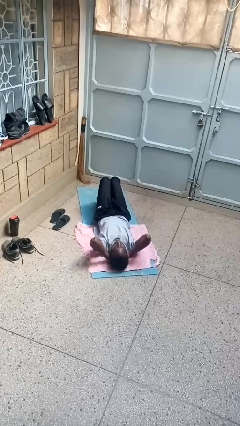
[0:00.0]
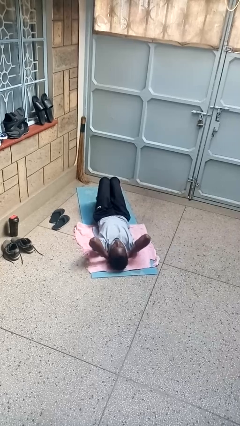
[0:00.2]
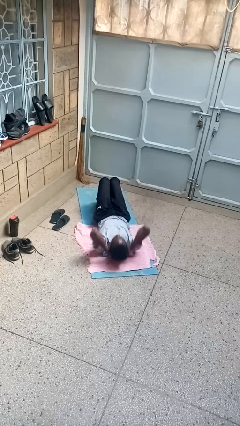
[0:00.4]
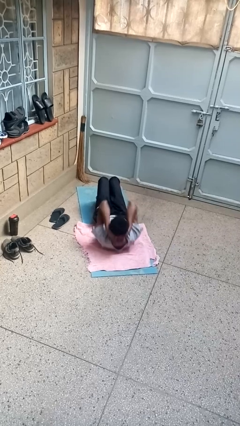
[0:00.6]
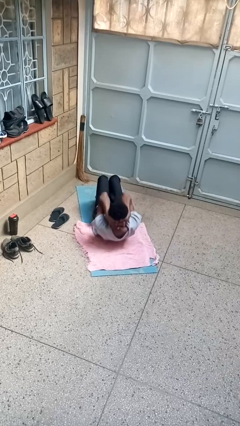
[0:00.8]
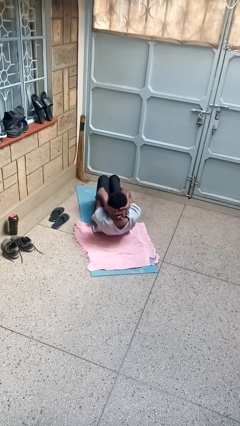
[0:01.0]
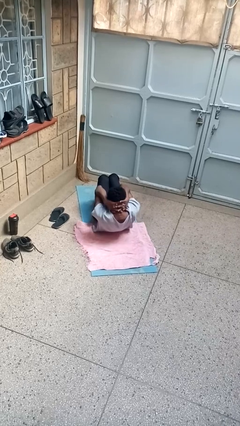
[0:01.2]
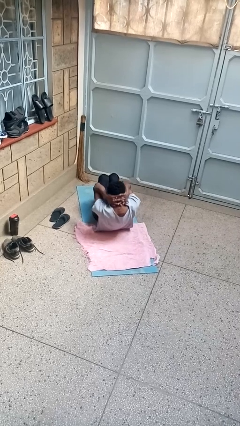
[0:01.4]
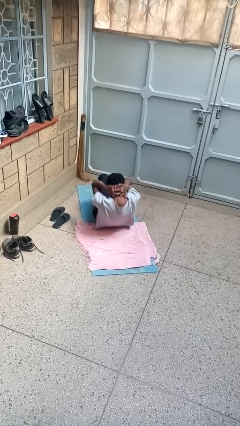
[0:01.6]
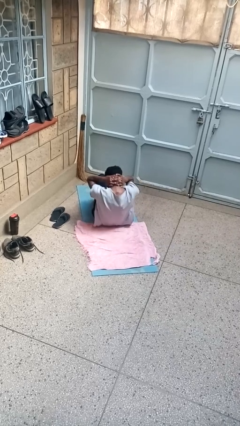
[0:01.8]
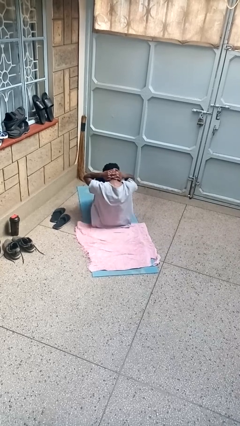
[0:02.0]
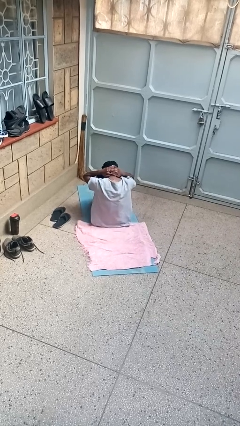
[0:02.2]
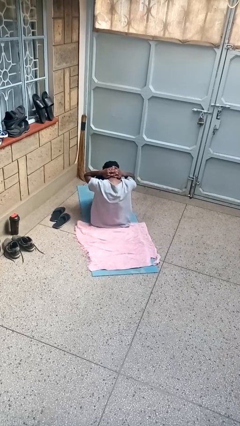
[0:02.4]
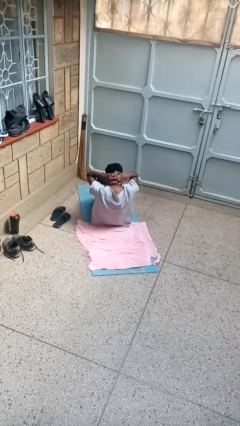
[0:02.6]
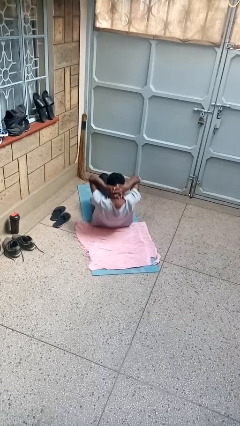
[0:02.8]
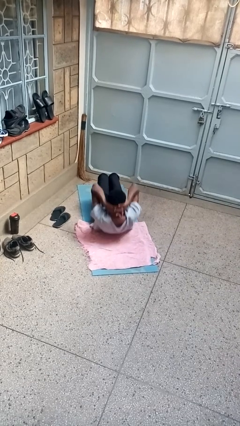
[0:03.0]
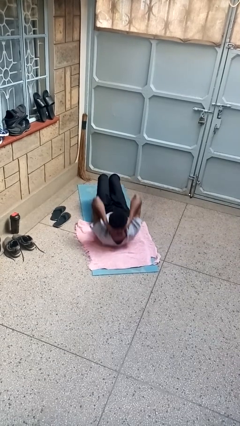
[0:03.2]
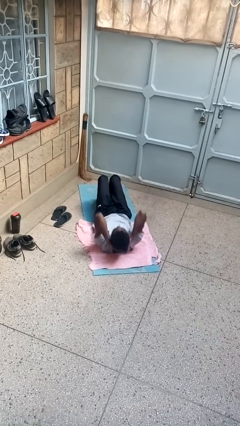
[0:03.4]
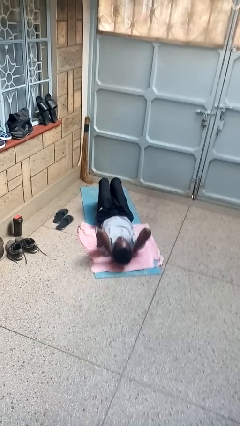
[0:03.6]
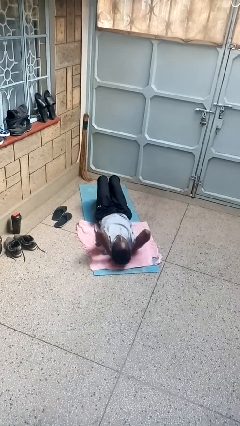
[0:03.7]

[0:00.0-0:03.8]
person exercises with situp

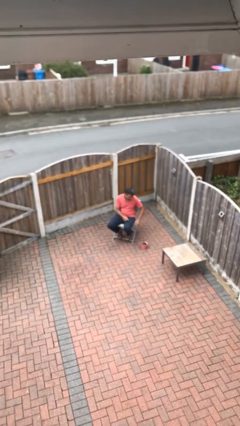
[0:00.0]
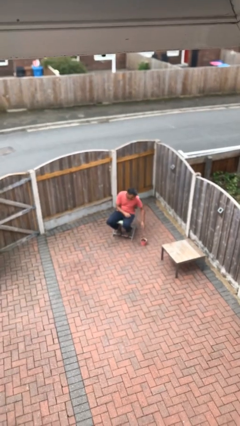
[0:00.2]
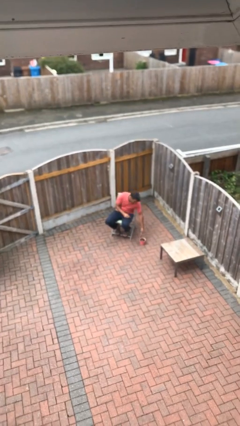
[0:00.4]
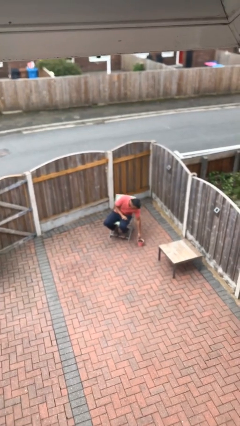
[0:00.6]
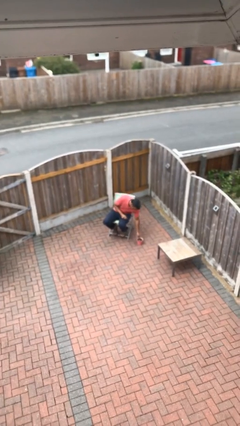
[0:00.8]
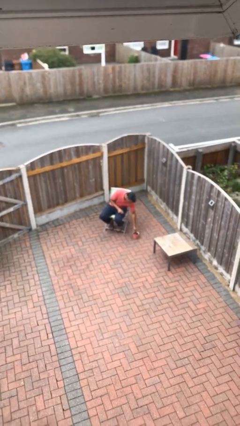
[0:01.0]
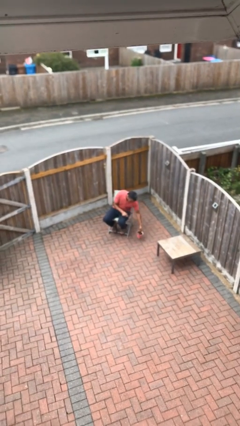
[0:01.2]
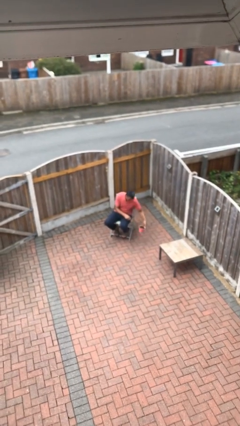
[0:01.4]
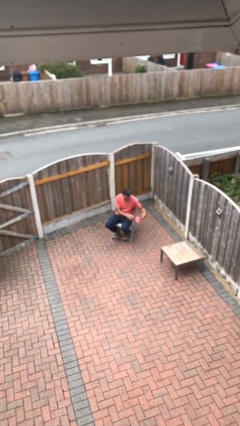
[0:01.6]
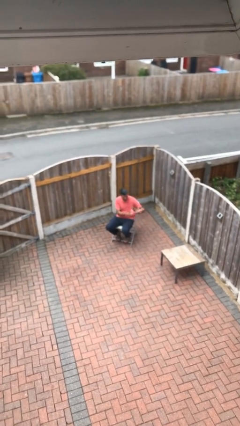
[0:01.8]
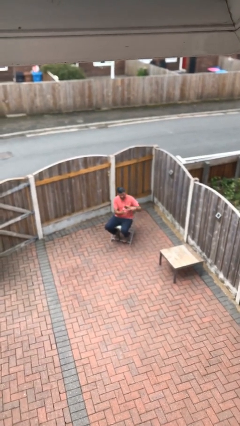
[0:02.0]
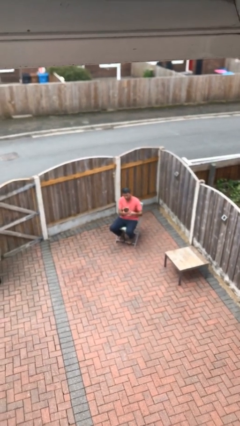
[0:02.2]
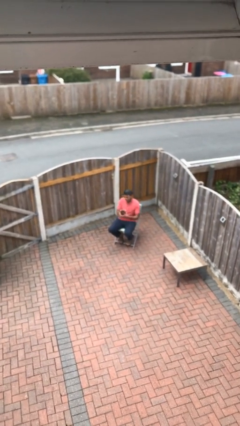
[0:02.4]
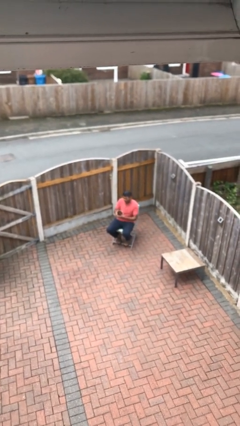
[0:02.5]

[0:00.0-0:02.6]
person picks up object from floor

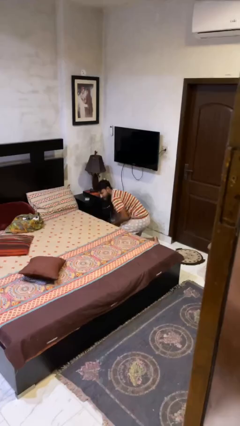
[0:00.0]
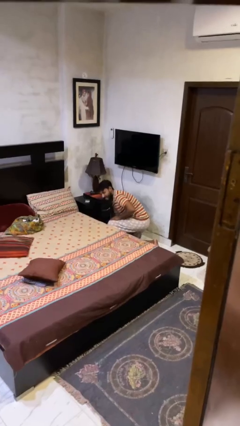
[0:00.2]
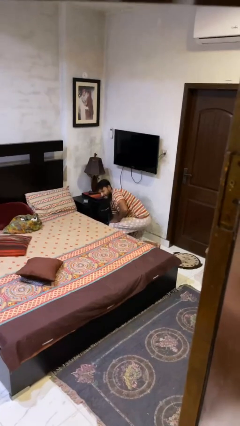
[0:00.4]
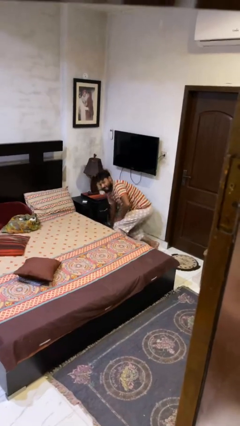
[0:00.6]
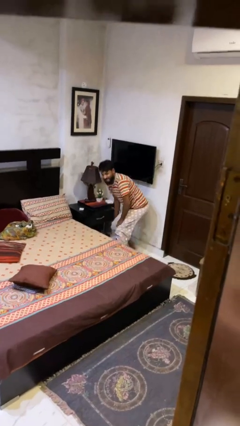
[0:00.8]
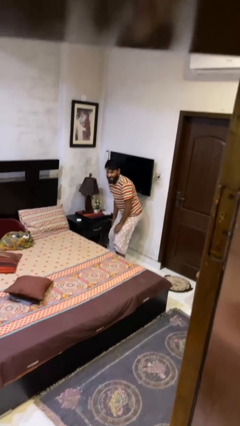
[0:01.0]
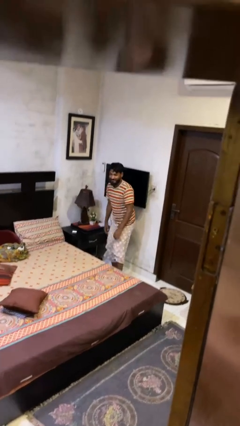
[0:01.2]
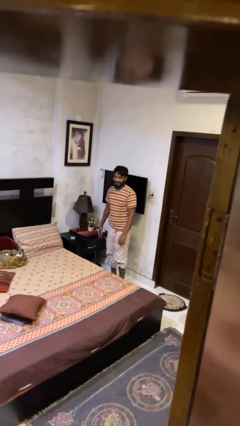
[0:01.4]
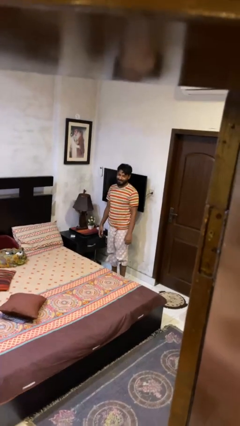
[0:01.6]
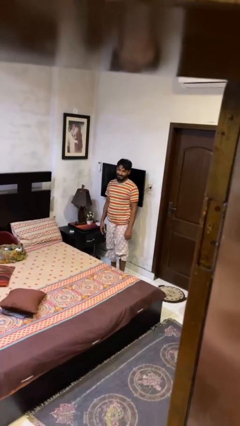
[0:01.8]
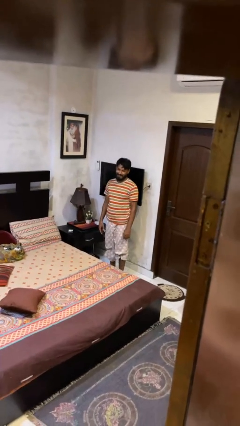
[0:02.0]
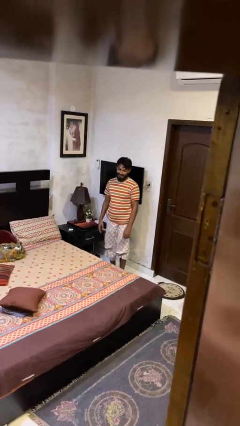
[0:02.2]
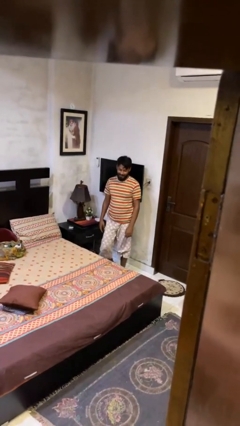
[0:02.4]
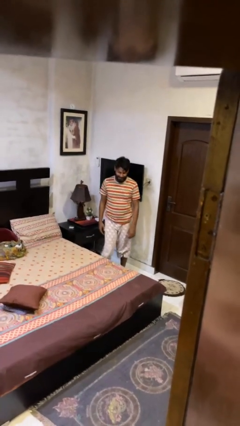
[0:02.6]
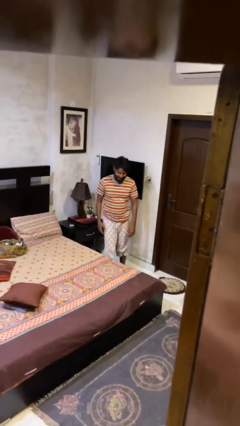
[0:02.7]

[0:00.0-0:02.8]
person stands up from floor

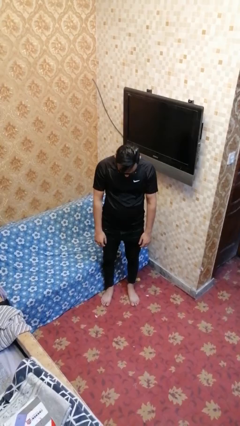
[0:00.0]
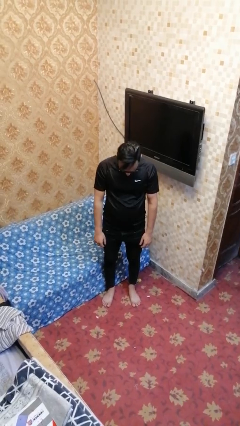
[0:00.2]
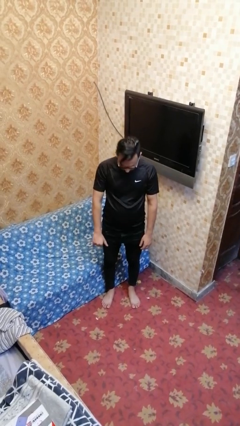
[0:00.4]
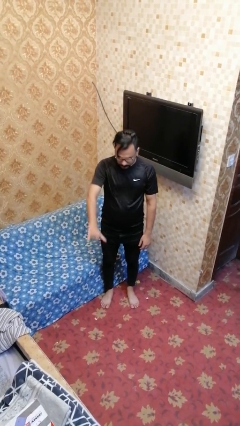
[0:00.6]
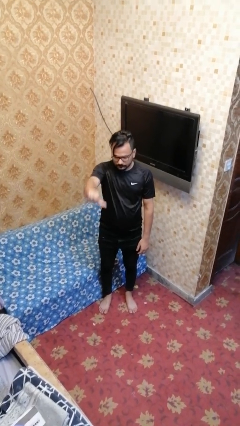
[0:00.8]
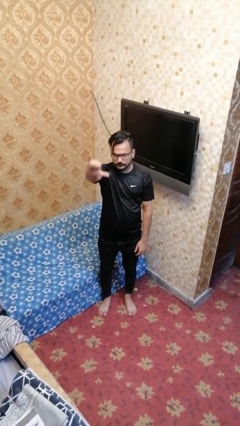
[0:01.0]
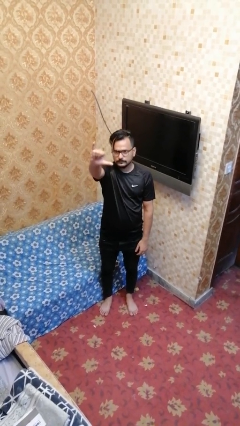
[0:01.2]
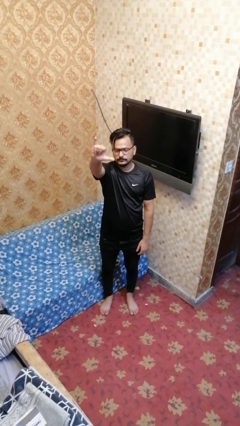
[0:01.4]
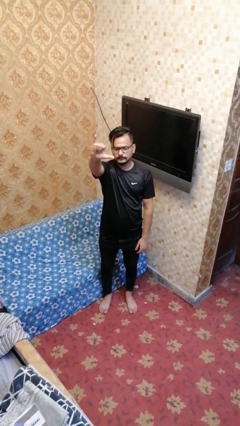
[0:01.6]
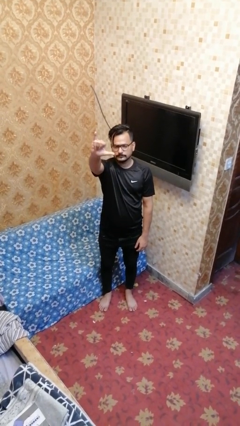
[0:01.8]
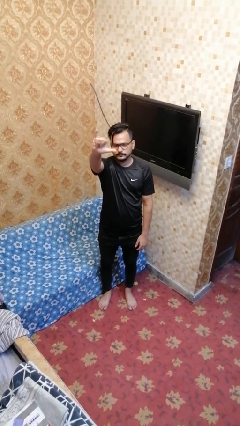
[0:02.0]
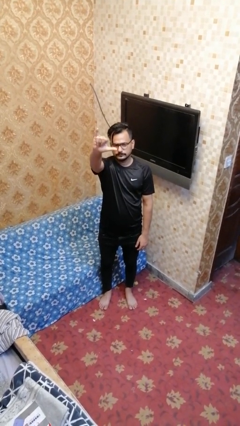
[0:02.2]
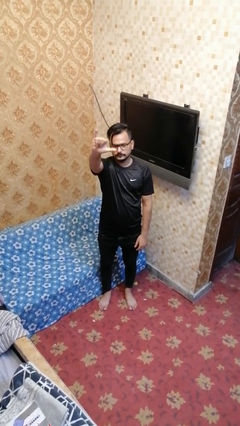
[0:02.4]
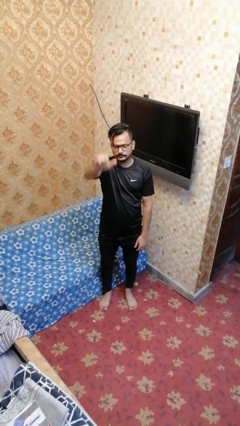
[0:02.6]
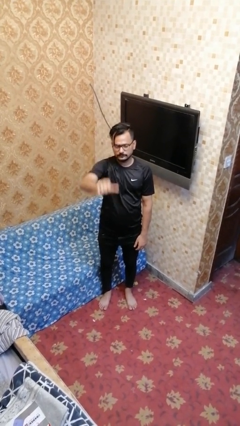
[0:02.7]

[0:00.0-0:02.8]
person gestures hang loose

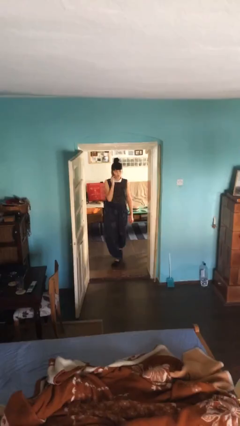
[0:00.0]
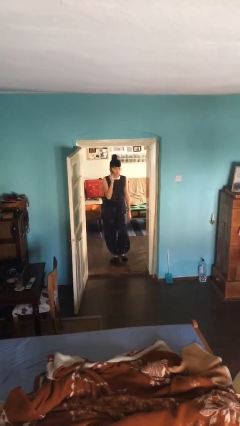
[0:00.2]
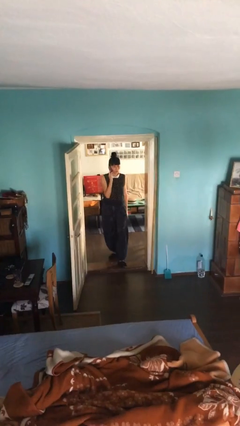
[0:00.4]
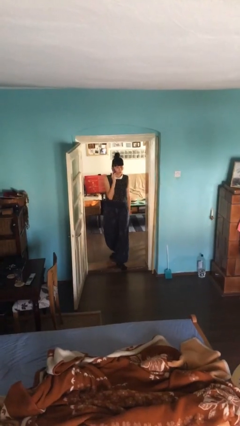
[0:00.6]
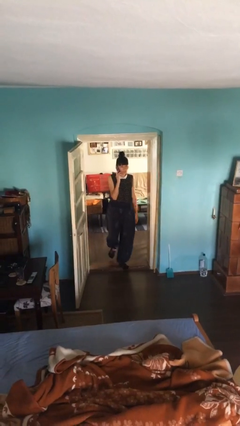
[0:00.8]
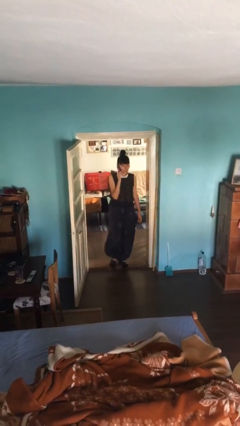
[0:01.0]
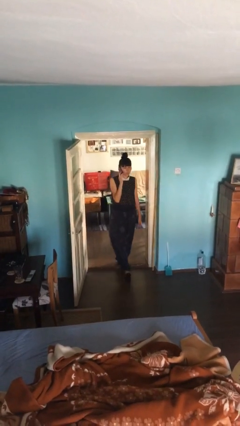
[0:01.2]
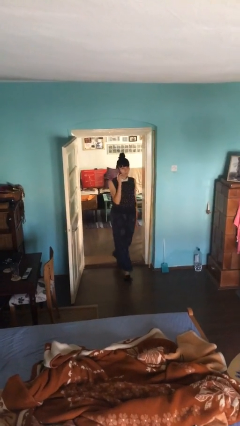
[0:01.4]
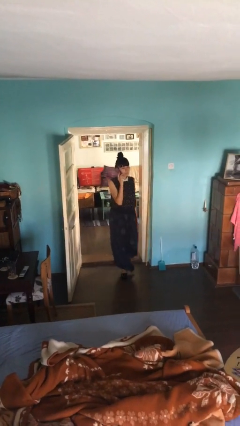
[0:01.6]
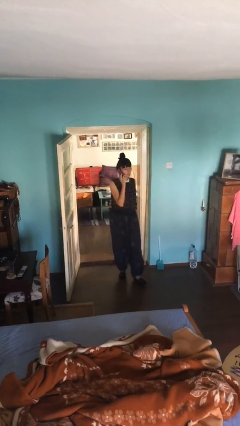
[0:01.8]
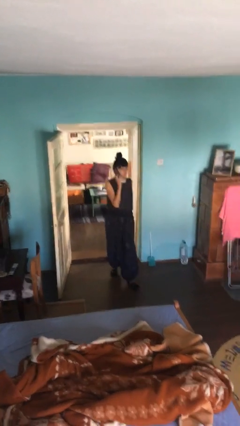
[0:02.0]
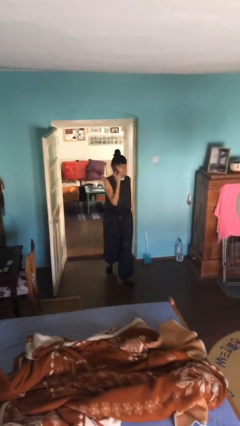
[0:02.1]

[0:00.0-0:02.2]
person enters scene through structure

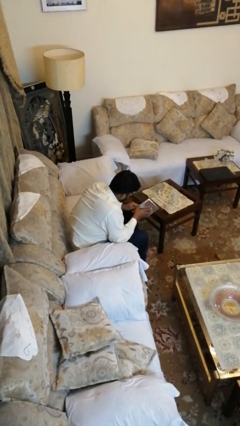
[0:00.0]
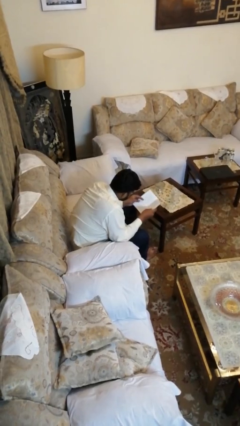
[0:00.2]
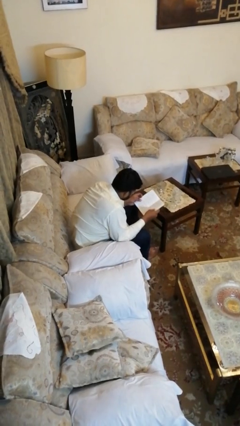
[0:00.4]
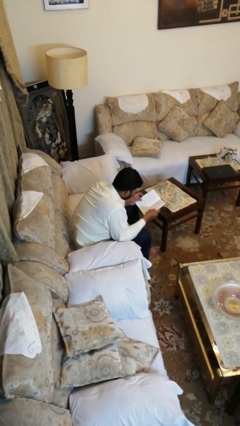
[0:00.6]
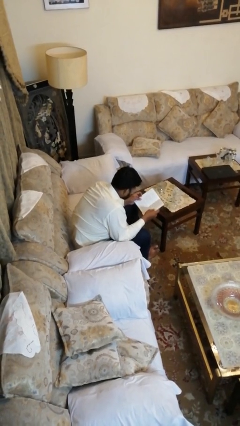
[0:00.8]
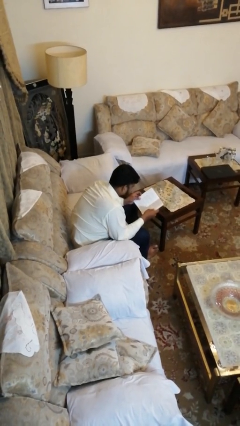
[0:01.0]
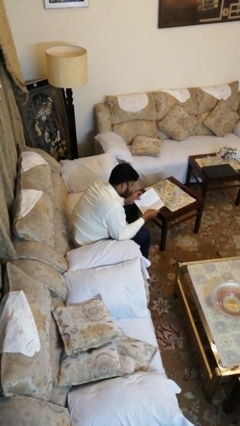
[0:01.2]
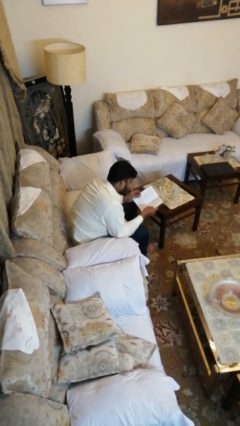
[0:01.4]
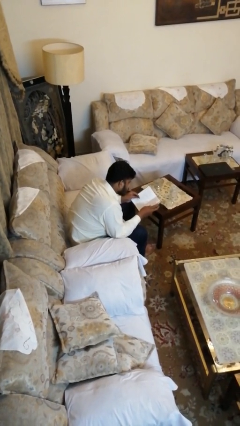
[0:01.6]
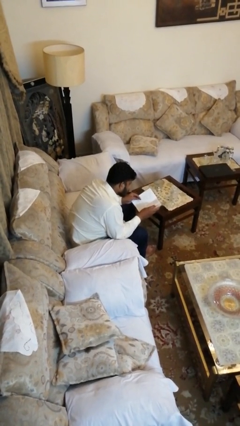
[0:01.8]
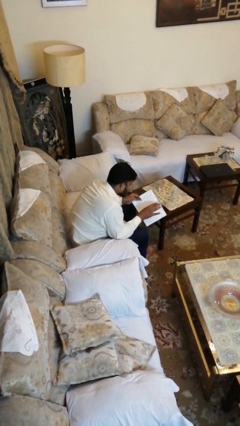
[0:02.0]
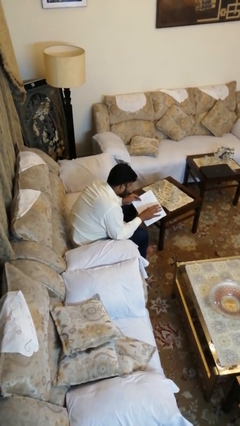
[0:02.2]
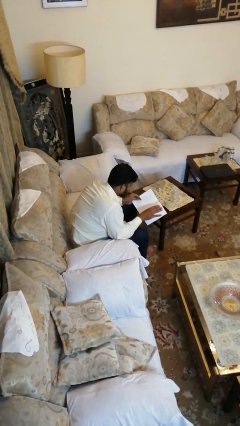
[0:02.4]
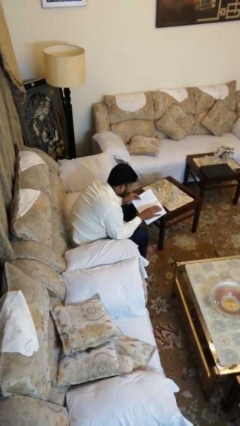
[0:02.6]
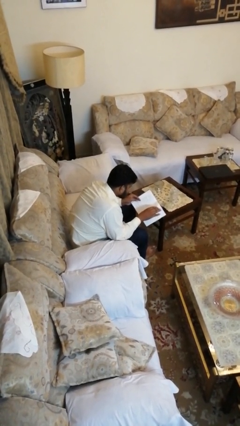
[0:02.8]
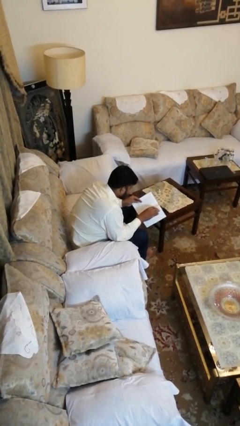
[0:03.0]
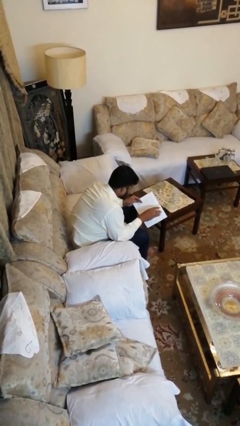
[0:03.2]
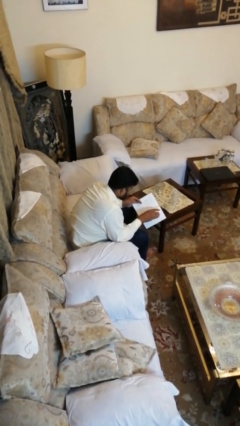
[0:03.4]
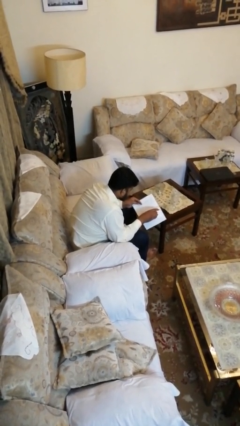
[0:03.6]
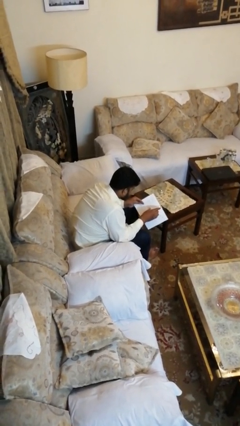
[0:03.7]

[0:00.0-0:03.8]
person reads book
